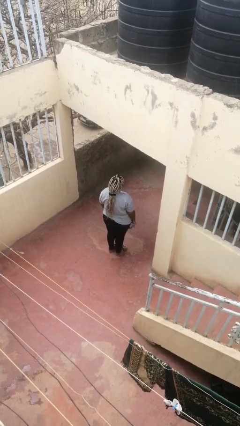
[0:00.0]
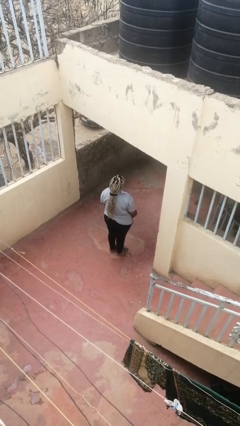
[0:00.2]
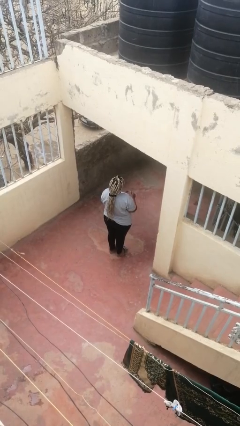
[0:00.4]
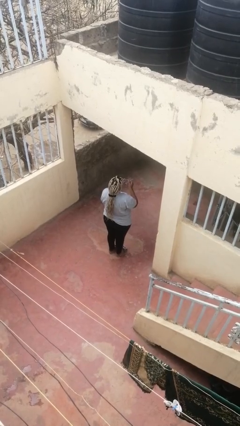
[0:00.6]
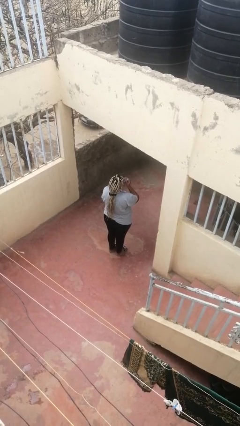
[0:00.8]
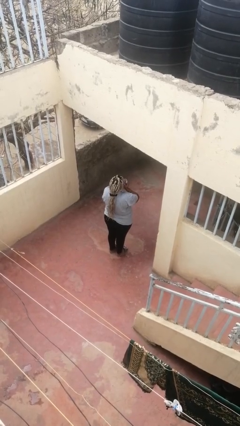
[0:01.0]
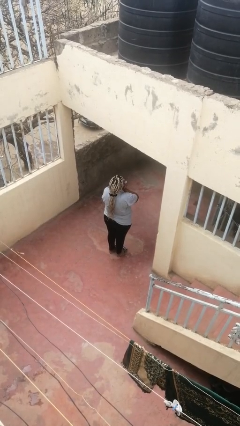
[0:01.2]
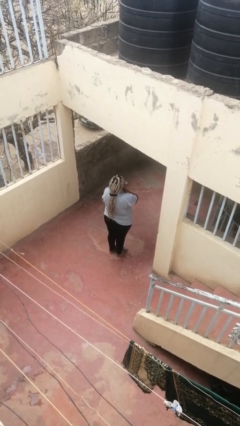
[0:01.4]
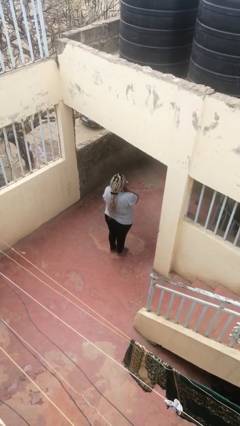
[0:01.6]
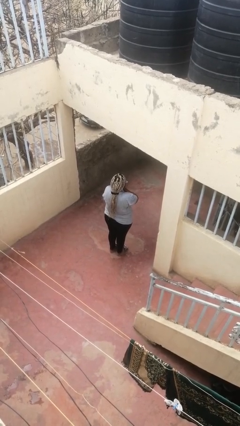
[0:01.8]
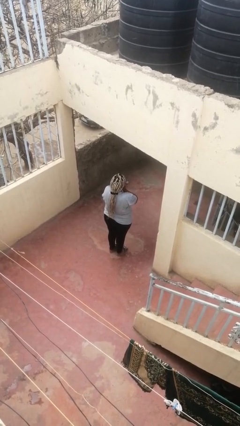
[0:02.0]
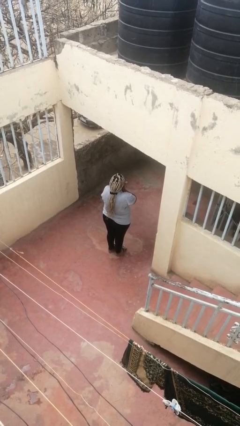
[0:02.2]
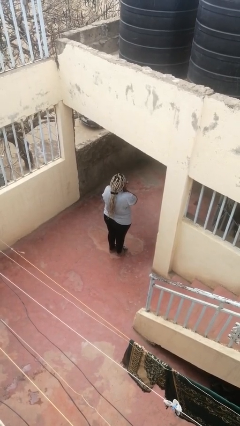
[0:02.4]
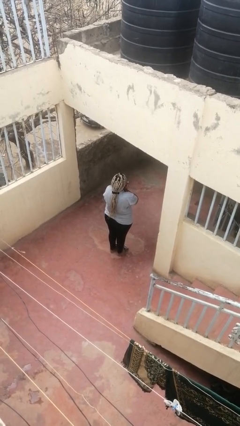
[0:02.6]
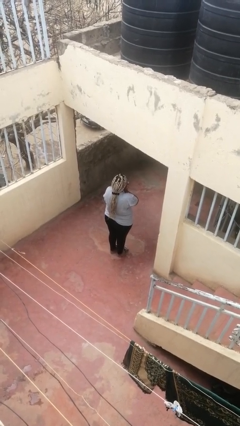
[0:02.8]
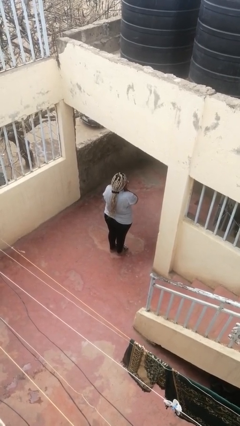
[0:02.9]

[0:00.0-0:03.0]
person blows nose

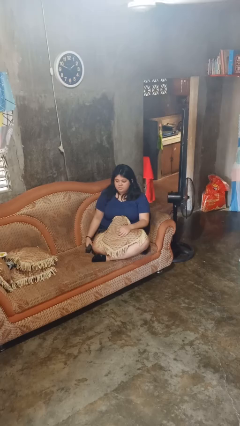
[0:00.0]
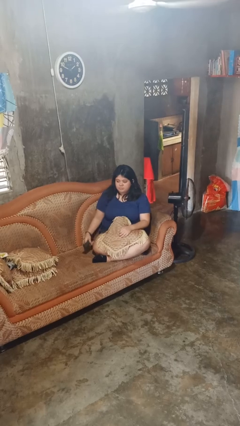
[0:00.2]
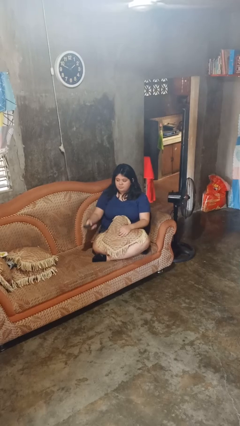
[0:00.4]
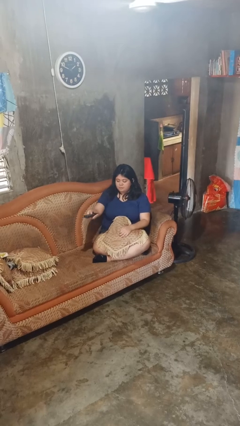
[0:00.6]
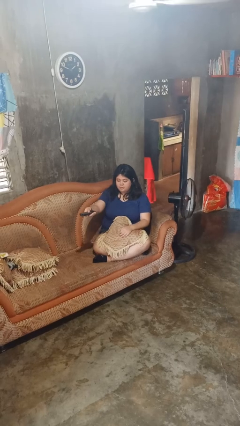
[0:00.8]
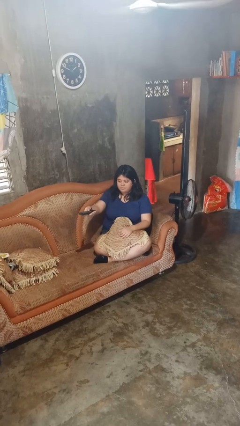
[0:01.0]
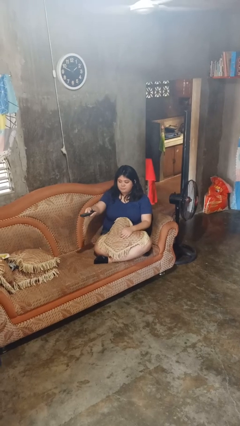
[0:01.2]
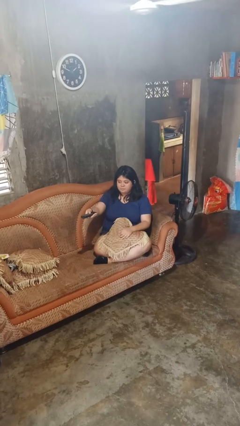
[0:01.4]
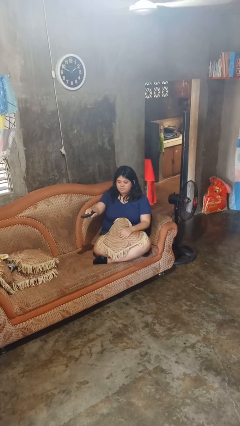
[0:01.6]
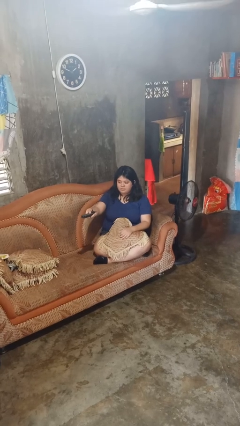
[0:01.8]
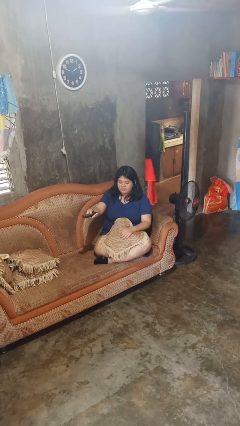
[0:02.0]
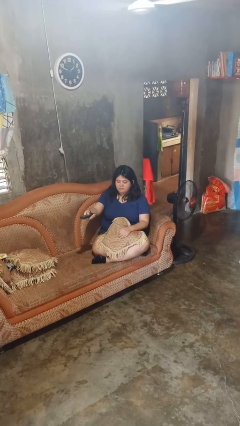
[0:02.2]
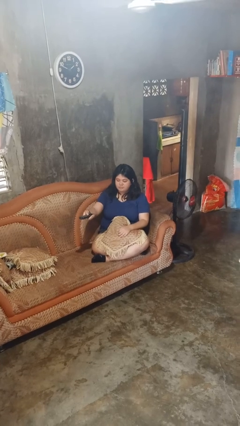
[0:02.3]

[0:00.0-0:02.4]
person uses television remote

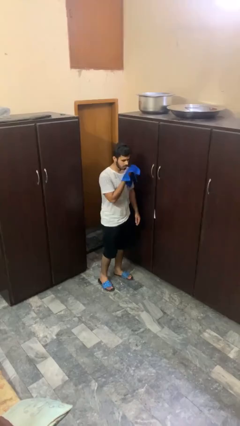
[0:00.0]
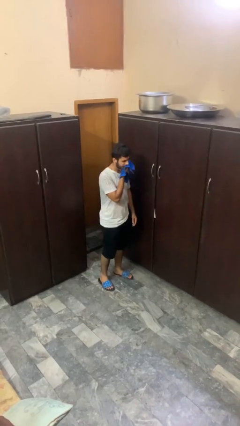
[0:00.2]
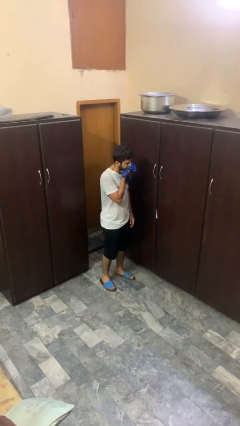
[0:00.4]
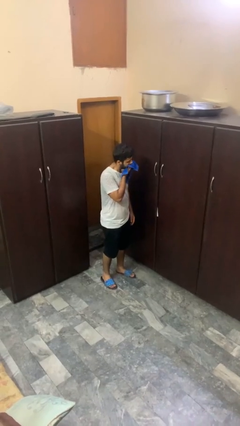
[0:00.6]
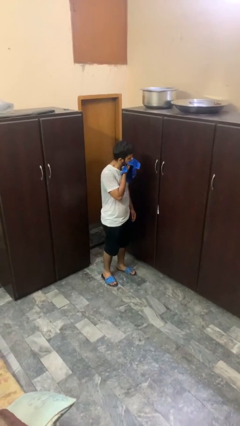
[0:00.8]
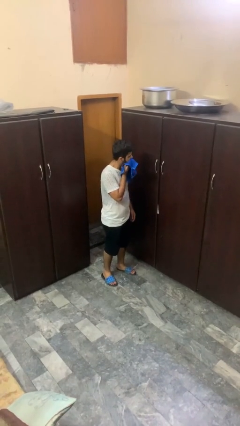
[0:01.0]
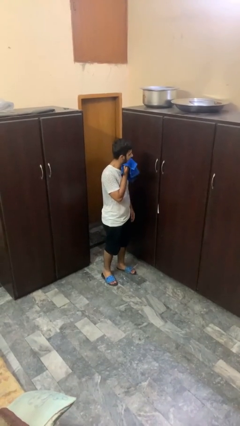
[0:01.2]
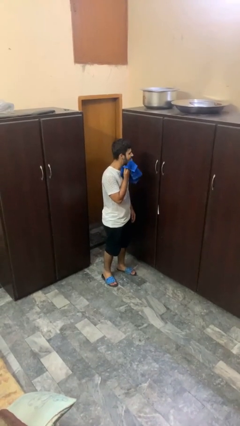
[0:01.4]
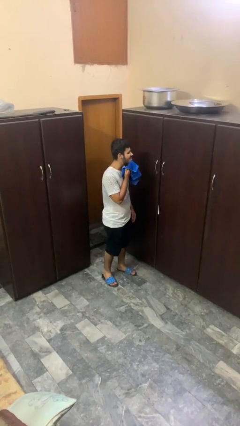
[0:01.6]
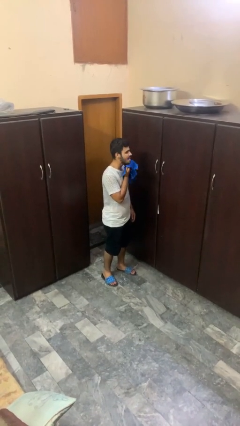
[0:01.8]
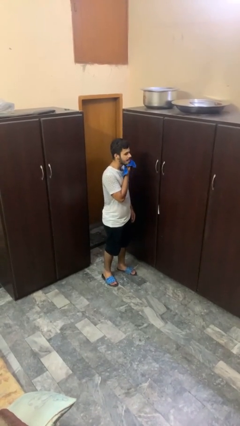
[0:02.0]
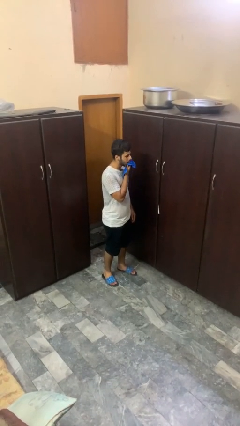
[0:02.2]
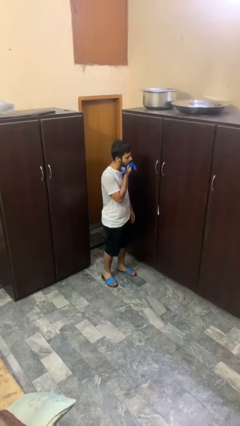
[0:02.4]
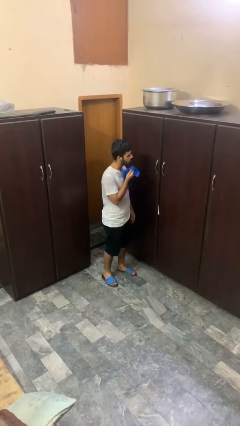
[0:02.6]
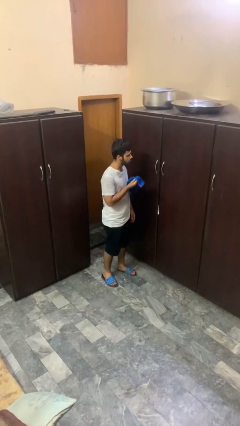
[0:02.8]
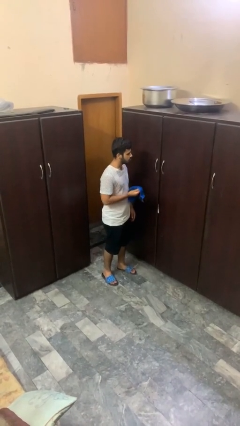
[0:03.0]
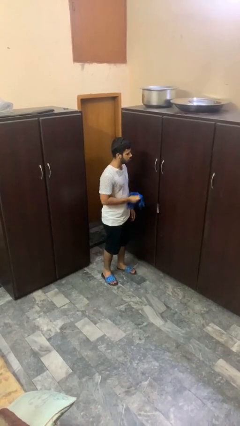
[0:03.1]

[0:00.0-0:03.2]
person wipes mouth with napkin

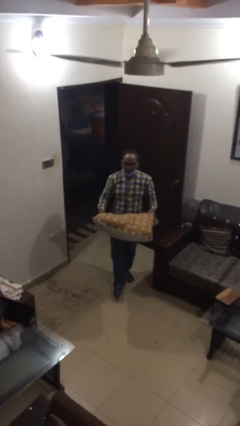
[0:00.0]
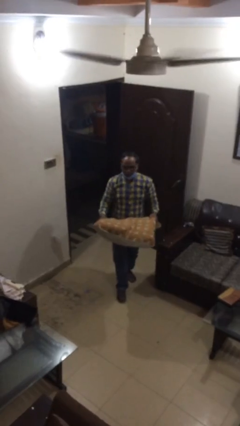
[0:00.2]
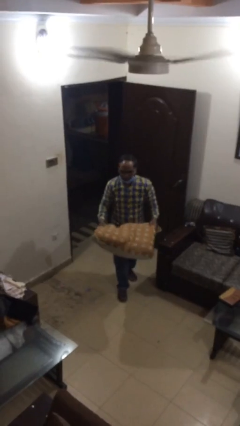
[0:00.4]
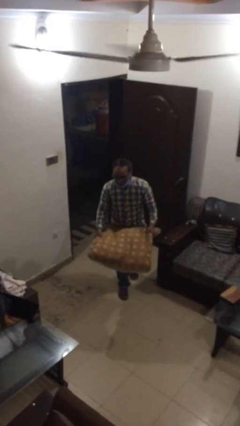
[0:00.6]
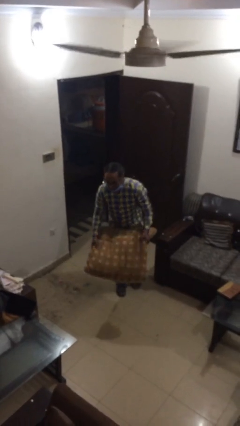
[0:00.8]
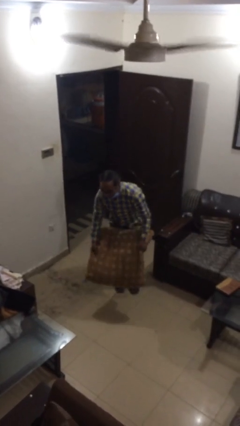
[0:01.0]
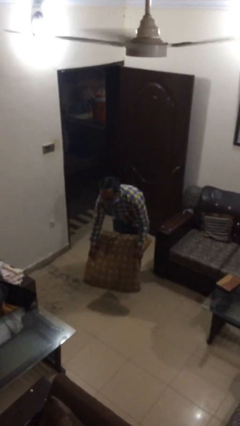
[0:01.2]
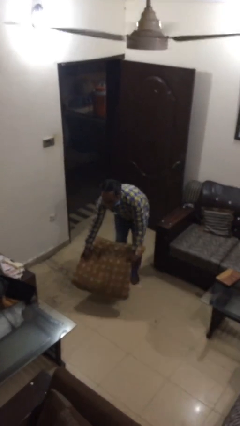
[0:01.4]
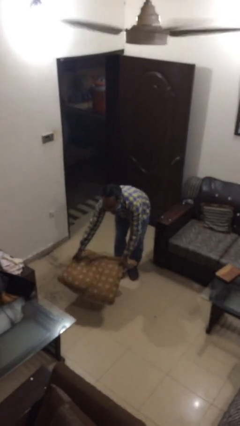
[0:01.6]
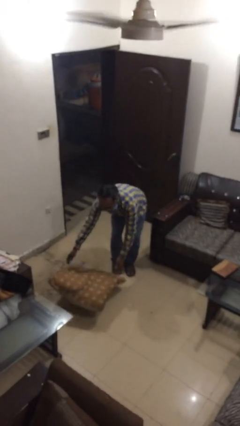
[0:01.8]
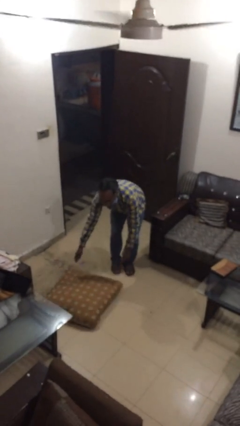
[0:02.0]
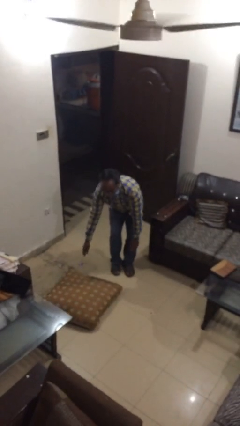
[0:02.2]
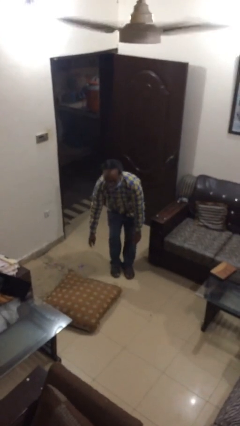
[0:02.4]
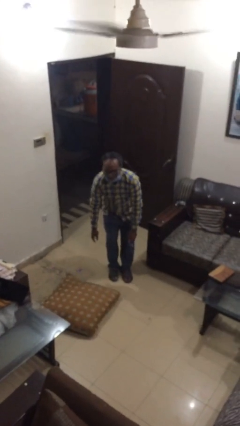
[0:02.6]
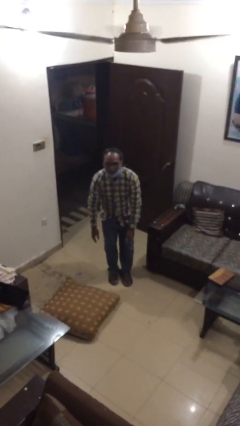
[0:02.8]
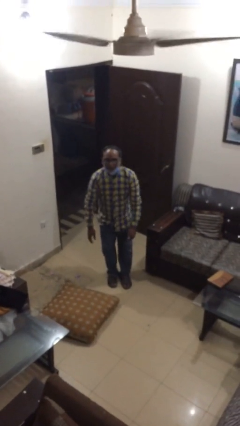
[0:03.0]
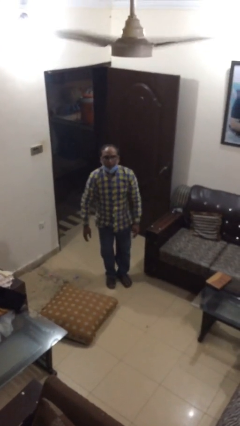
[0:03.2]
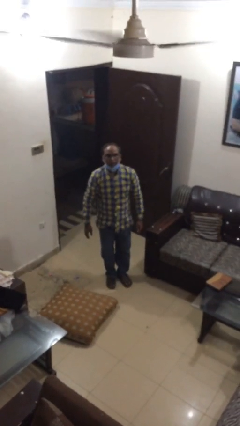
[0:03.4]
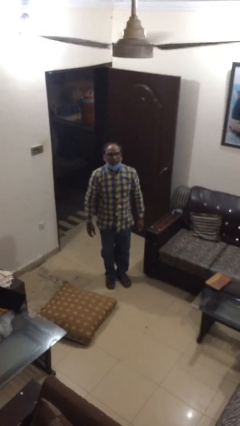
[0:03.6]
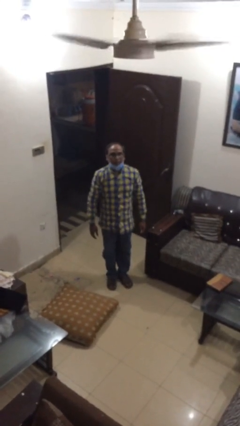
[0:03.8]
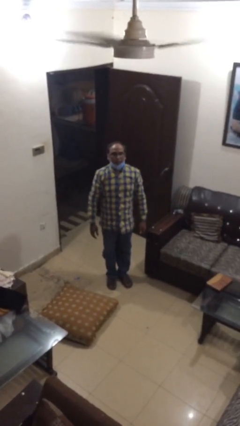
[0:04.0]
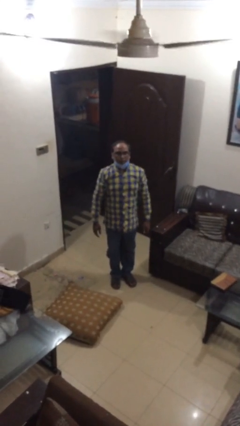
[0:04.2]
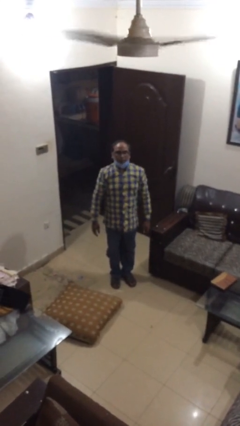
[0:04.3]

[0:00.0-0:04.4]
person puts down object on floor

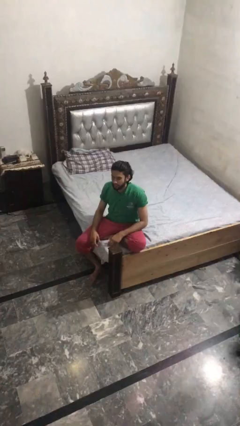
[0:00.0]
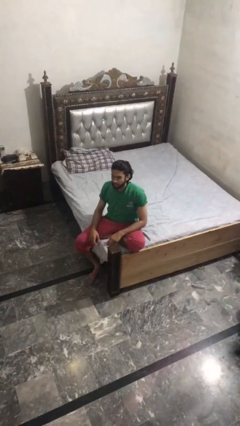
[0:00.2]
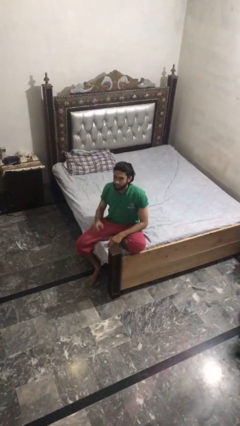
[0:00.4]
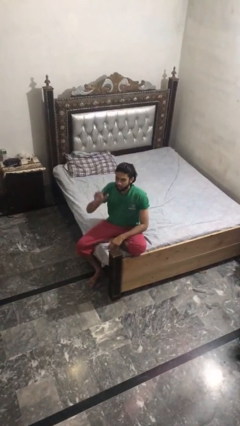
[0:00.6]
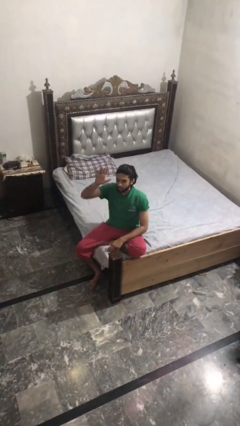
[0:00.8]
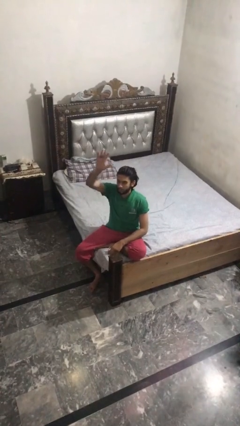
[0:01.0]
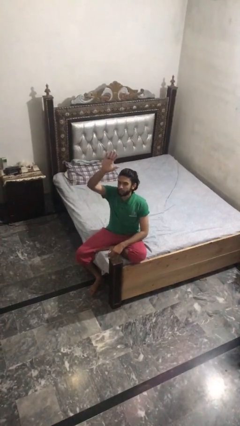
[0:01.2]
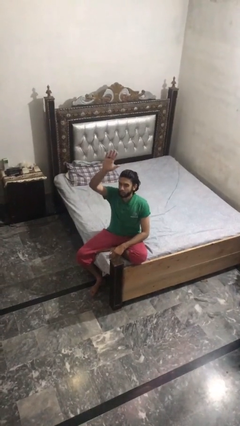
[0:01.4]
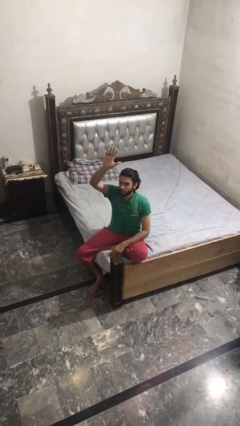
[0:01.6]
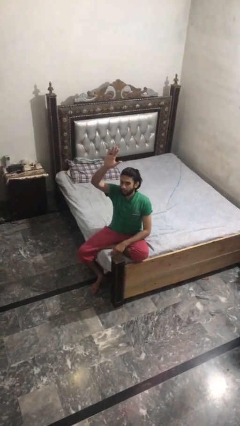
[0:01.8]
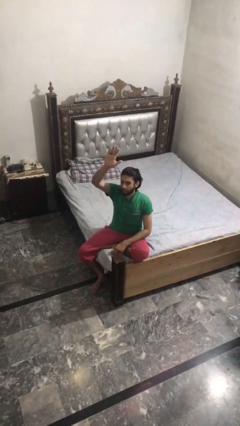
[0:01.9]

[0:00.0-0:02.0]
person gestures raise hand

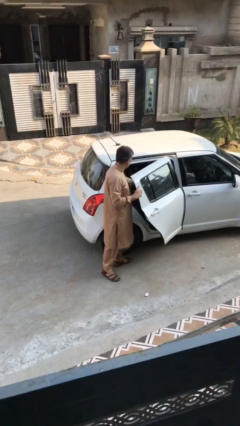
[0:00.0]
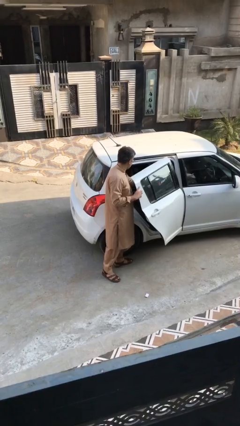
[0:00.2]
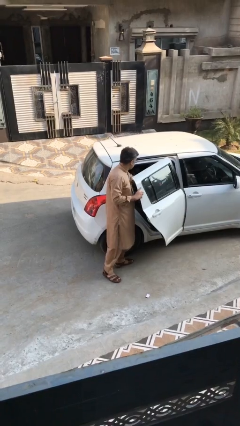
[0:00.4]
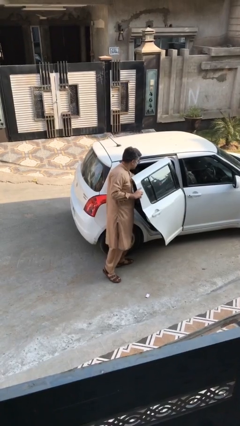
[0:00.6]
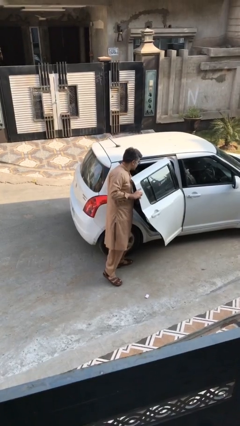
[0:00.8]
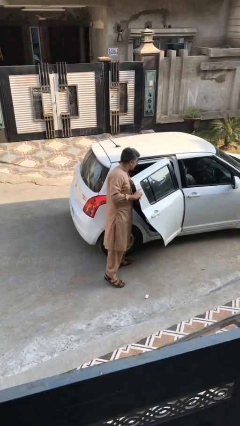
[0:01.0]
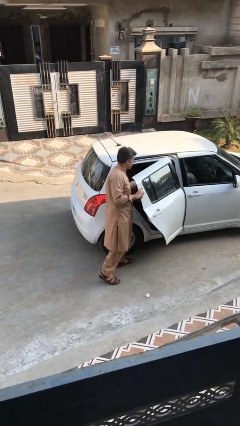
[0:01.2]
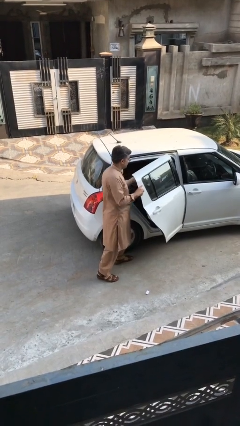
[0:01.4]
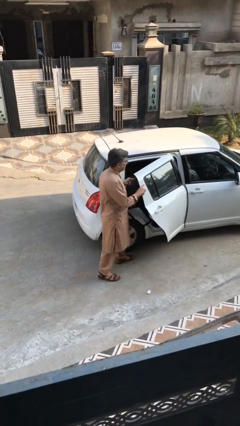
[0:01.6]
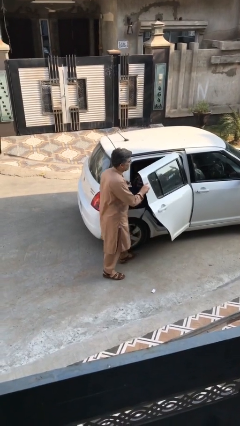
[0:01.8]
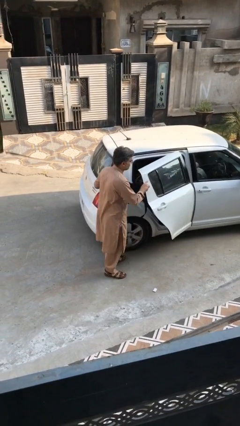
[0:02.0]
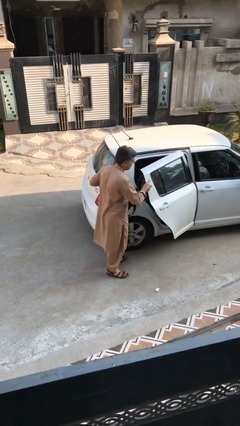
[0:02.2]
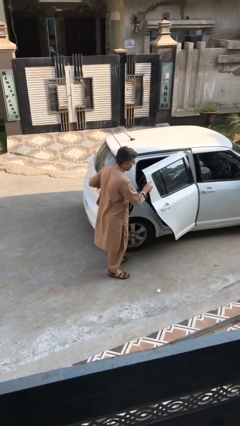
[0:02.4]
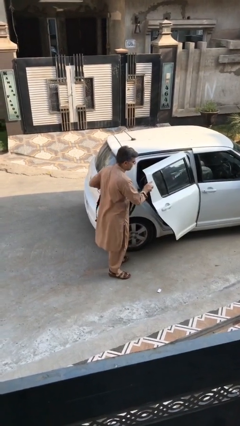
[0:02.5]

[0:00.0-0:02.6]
person unloads car
